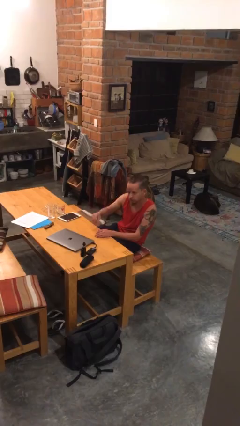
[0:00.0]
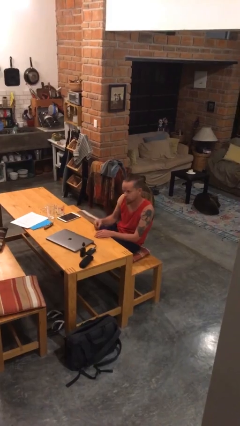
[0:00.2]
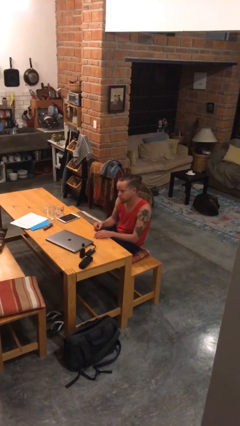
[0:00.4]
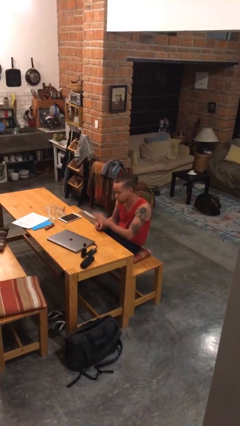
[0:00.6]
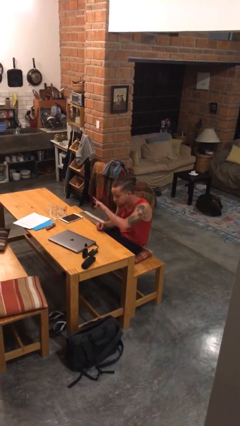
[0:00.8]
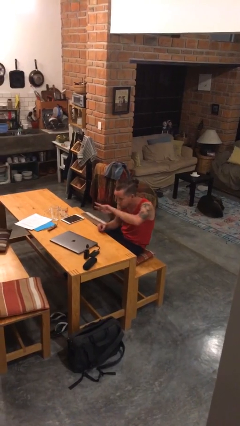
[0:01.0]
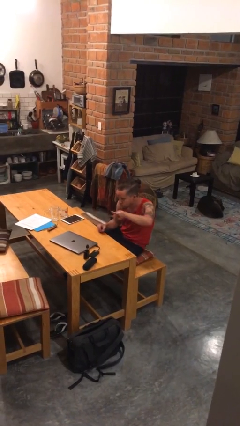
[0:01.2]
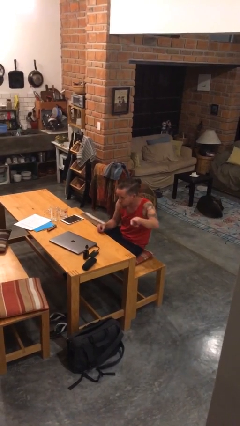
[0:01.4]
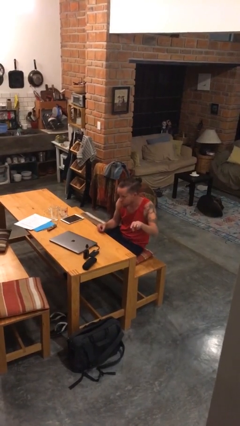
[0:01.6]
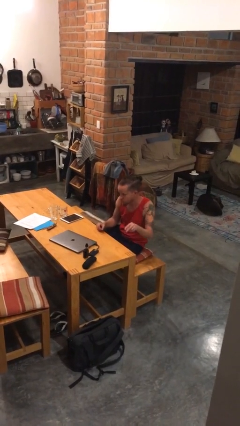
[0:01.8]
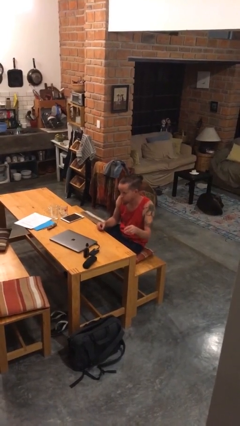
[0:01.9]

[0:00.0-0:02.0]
person gestures swipe left

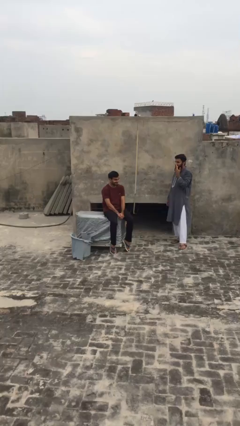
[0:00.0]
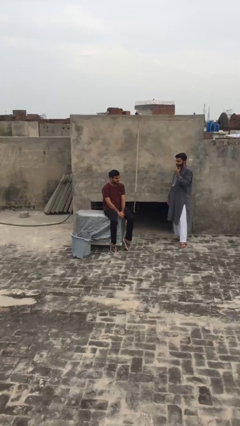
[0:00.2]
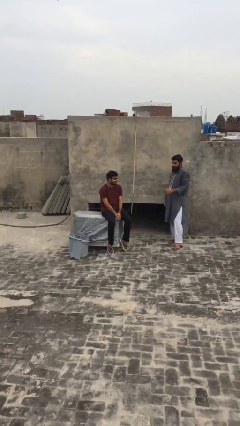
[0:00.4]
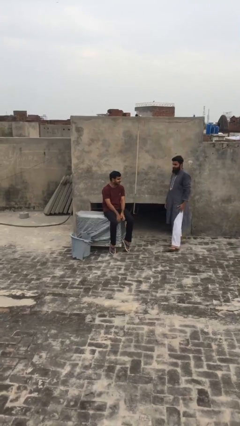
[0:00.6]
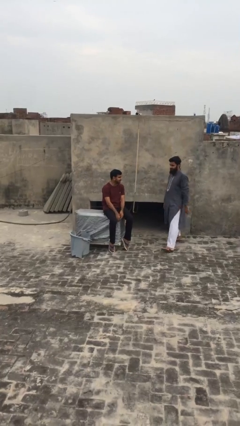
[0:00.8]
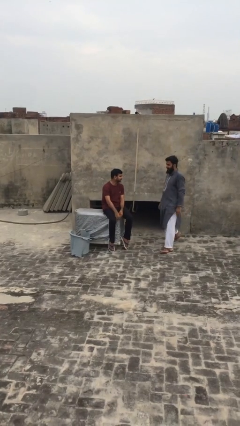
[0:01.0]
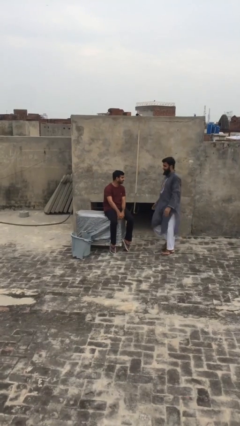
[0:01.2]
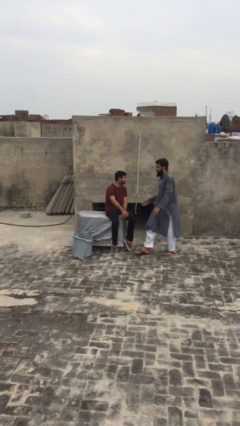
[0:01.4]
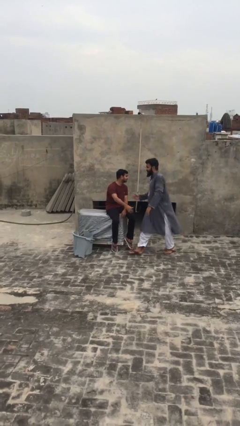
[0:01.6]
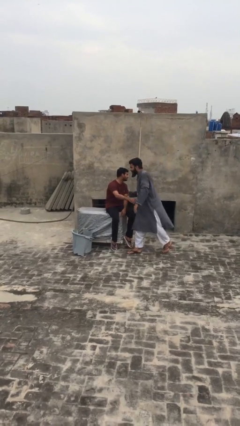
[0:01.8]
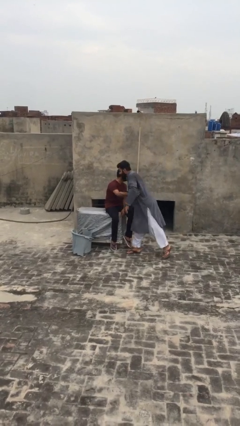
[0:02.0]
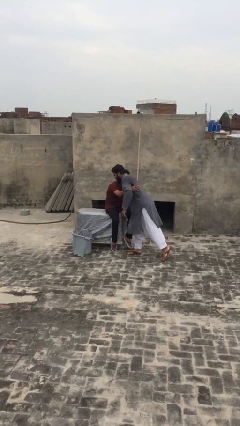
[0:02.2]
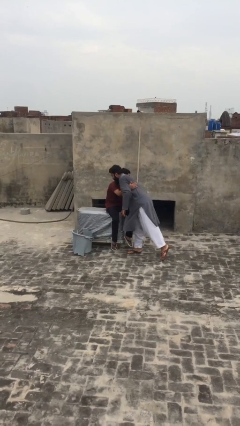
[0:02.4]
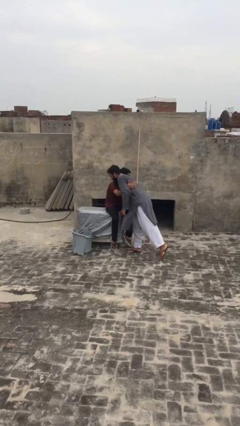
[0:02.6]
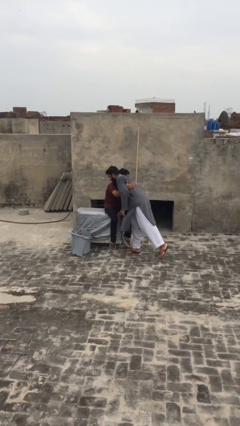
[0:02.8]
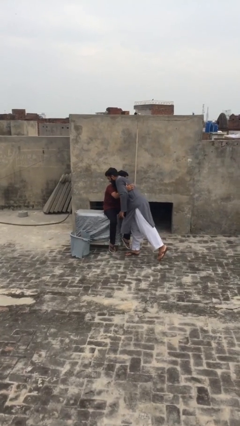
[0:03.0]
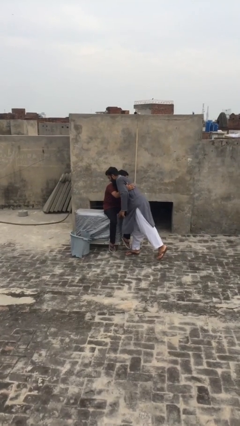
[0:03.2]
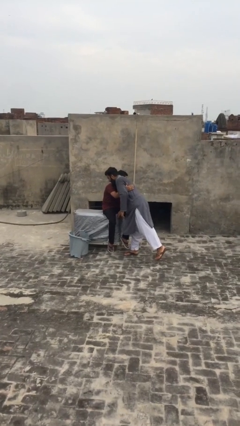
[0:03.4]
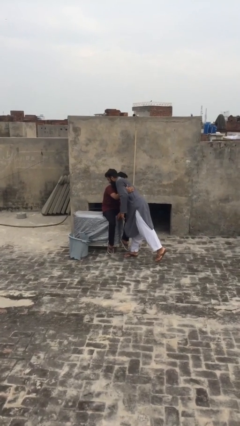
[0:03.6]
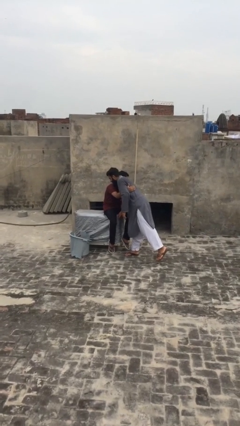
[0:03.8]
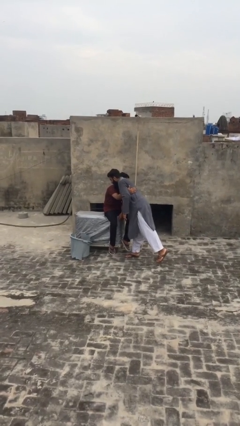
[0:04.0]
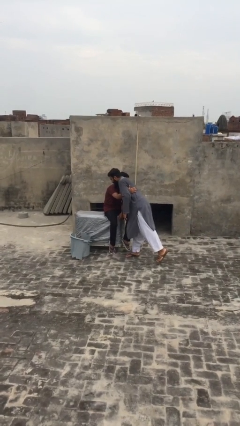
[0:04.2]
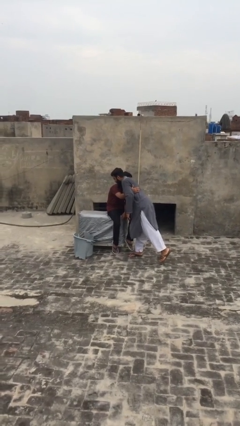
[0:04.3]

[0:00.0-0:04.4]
person embraces person

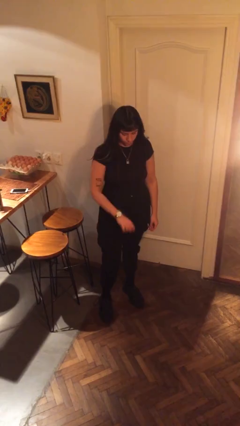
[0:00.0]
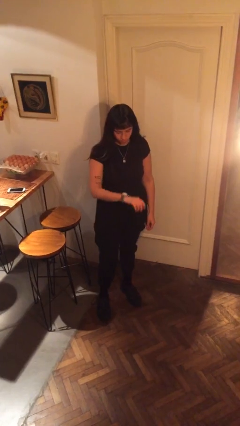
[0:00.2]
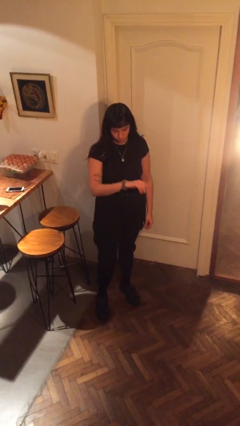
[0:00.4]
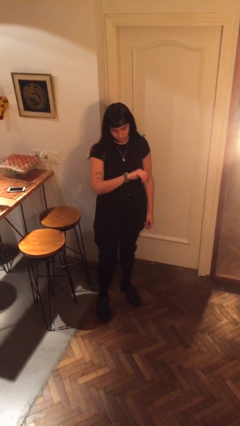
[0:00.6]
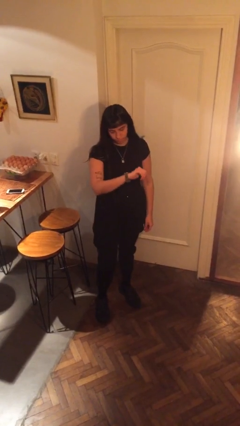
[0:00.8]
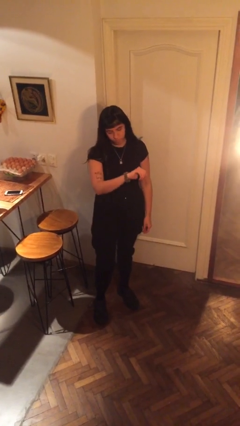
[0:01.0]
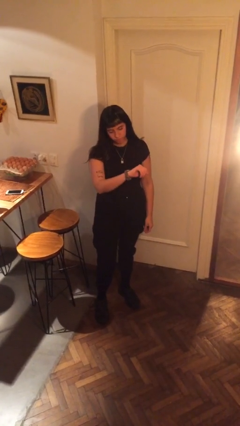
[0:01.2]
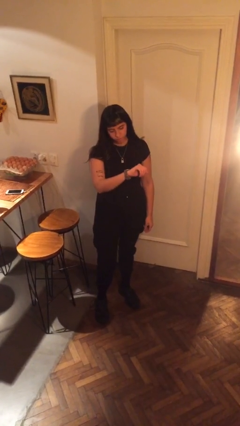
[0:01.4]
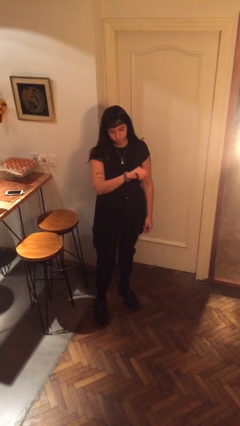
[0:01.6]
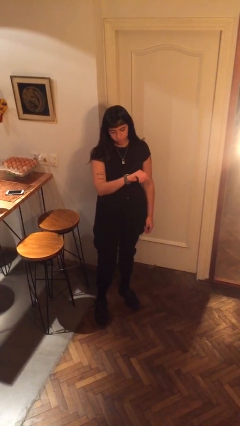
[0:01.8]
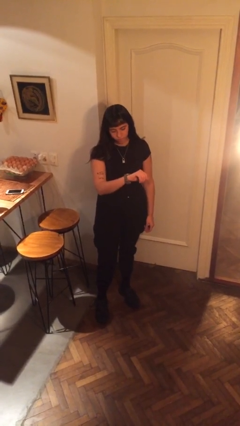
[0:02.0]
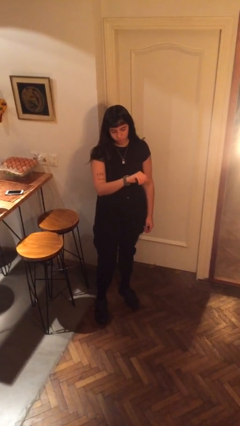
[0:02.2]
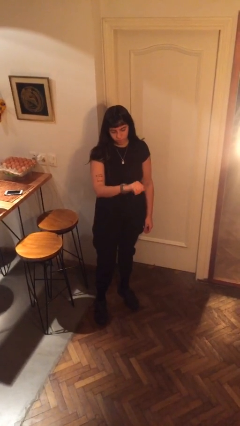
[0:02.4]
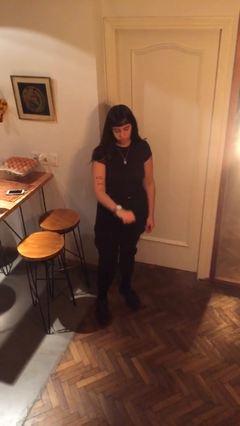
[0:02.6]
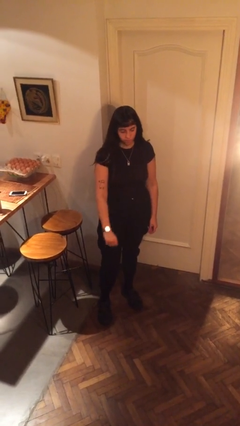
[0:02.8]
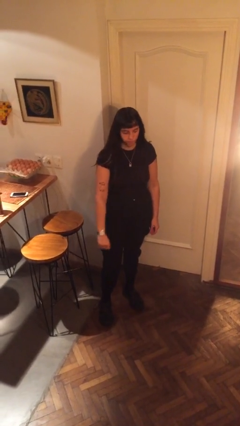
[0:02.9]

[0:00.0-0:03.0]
person looks at wristwatch

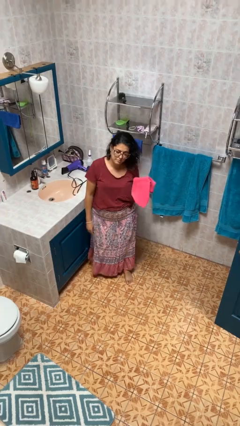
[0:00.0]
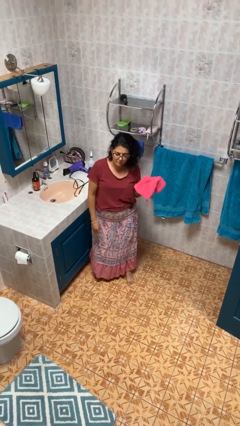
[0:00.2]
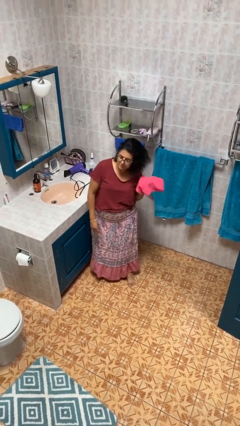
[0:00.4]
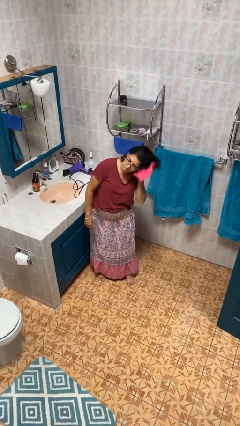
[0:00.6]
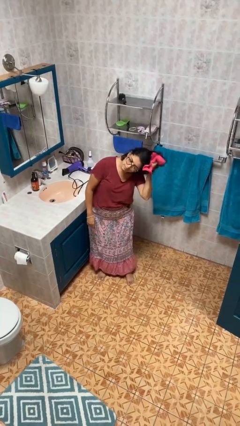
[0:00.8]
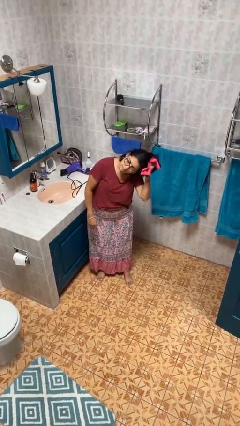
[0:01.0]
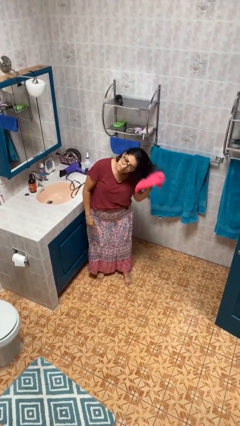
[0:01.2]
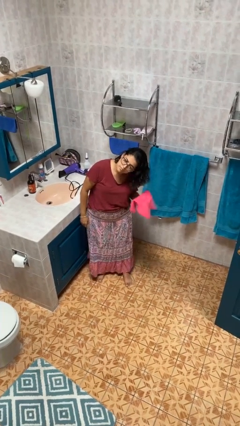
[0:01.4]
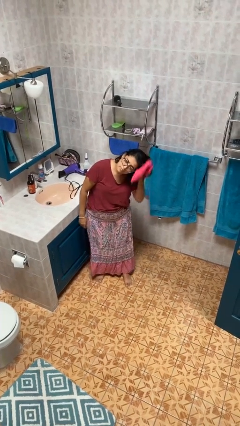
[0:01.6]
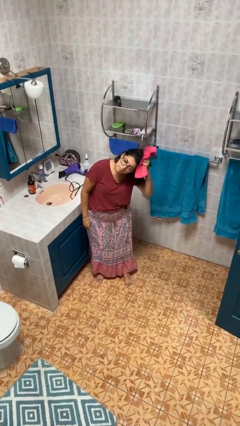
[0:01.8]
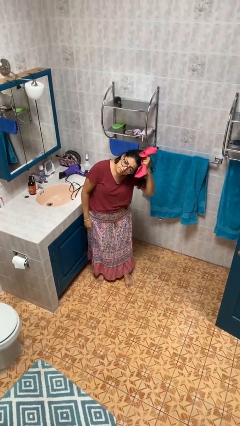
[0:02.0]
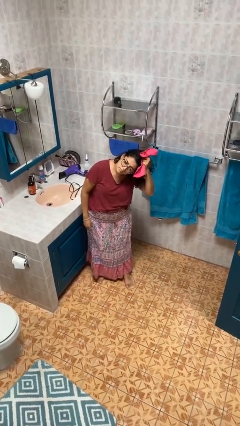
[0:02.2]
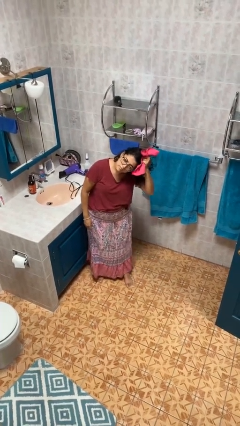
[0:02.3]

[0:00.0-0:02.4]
person dries hair with towel

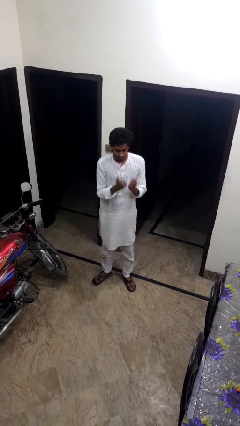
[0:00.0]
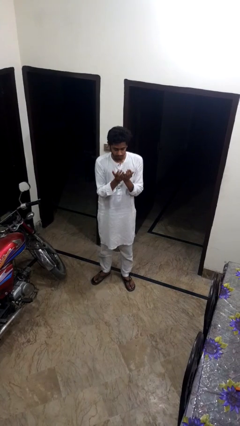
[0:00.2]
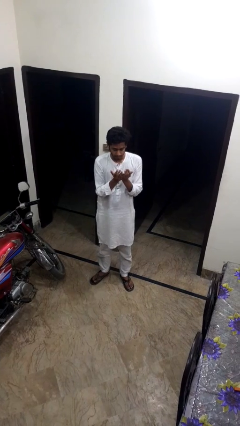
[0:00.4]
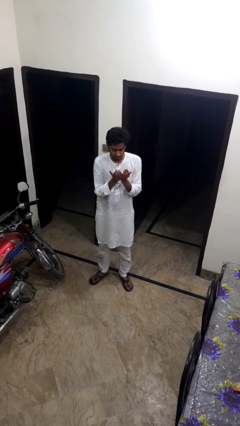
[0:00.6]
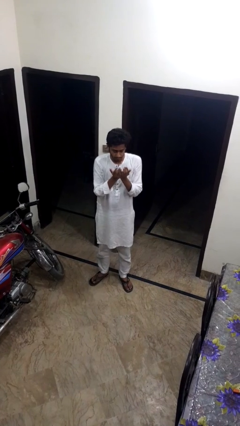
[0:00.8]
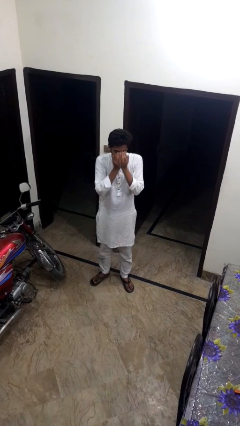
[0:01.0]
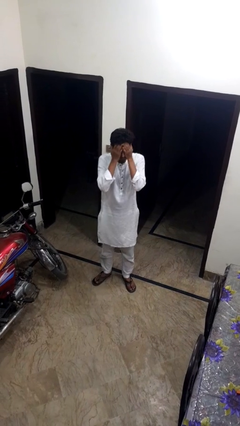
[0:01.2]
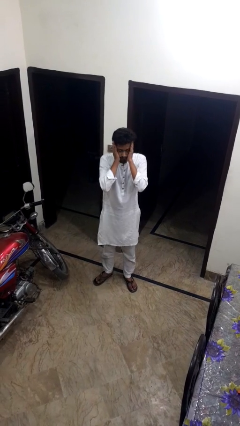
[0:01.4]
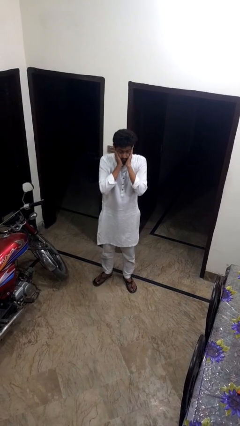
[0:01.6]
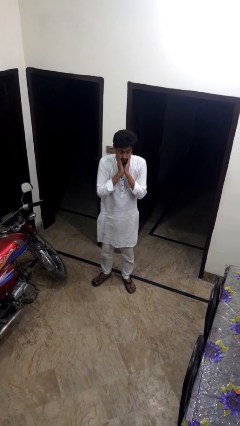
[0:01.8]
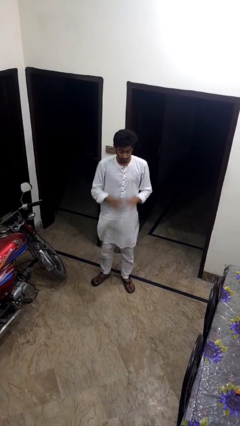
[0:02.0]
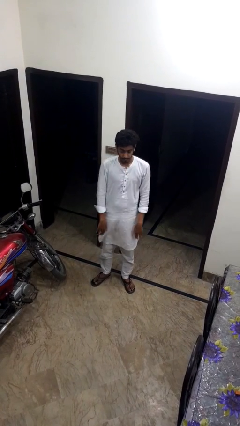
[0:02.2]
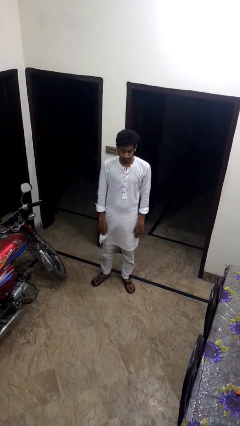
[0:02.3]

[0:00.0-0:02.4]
person prays

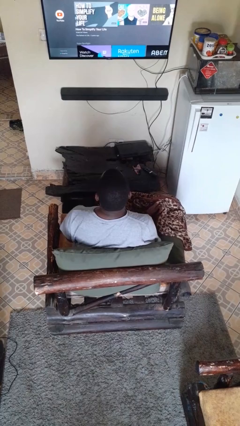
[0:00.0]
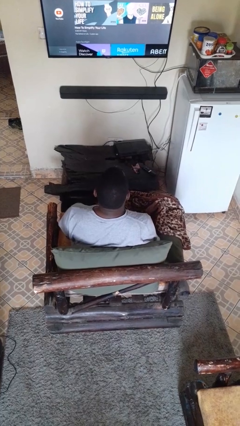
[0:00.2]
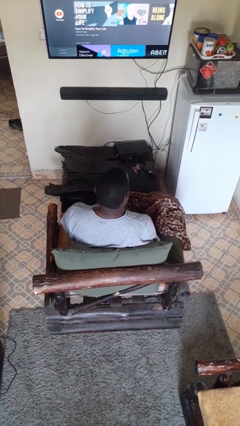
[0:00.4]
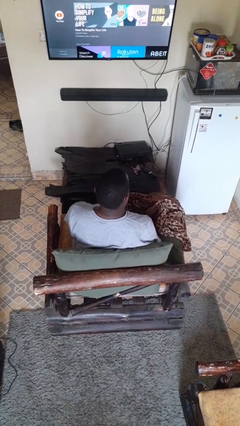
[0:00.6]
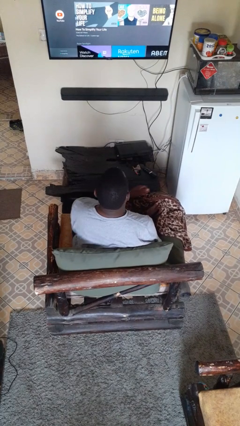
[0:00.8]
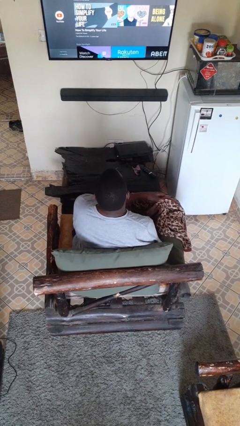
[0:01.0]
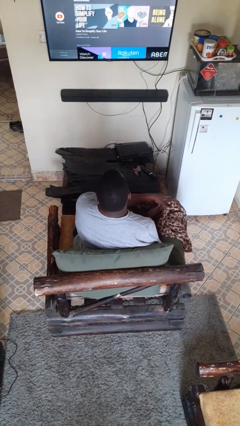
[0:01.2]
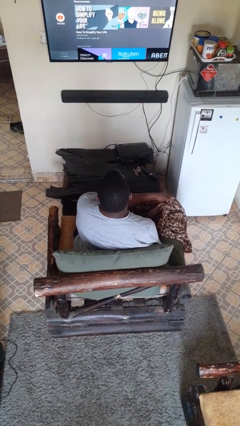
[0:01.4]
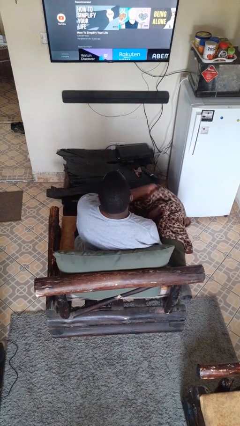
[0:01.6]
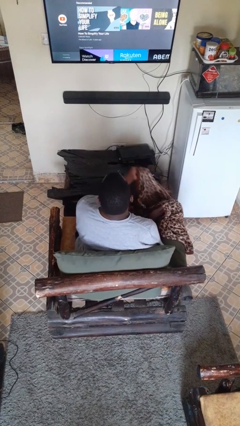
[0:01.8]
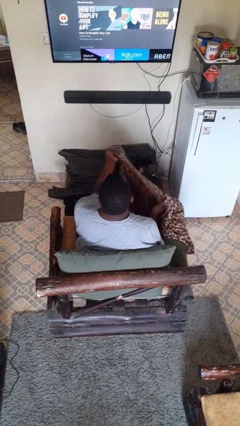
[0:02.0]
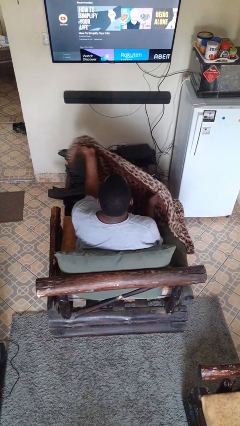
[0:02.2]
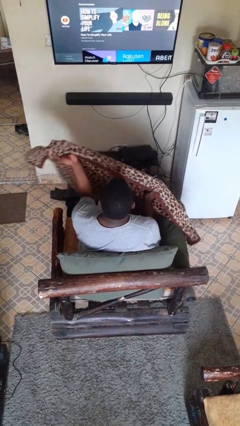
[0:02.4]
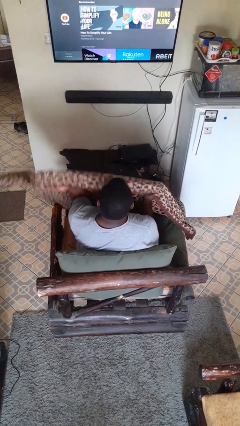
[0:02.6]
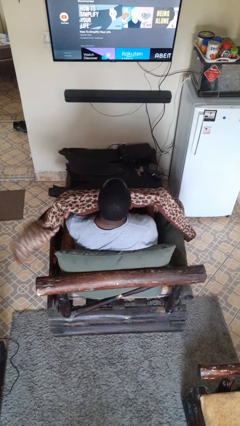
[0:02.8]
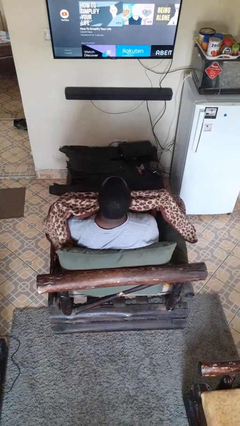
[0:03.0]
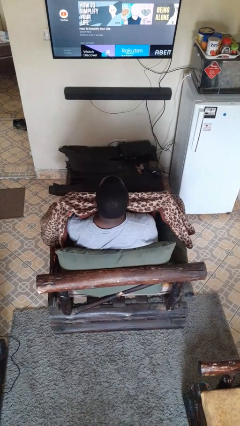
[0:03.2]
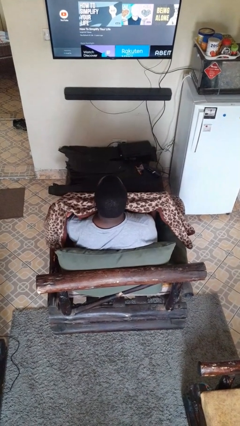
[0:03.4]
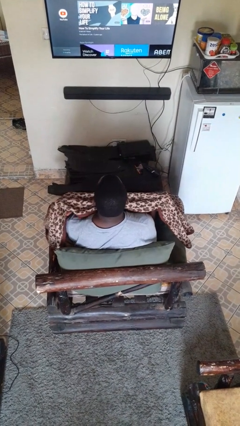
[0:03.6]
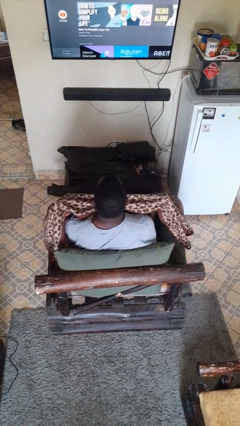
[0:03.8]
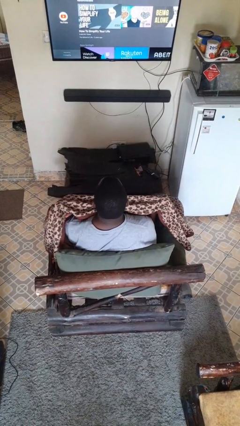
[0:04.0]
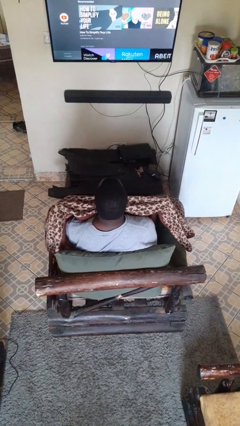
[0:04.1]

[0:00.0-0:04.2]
person covers with blanket
